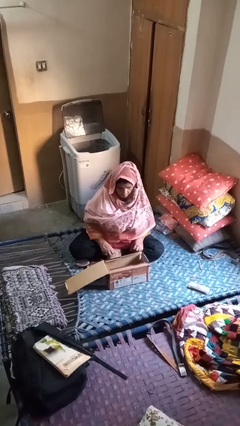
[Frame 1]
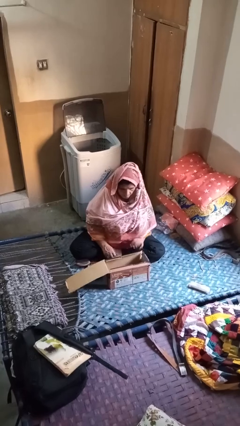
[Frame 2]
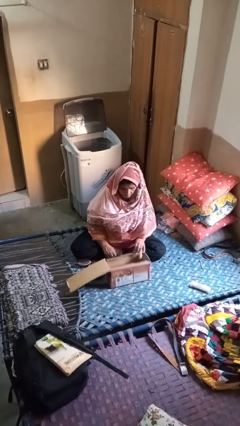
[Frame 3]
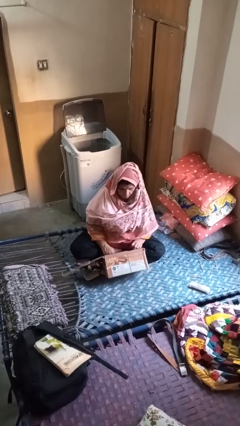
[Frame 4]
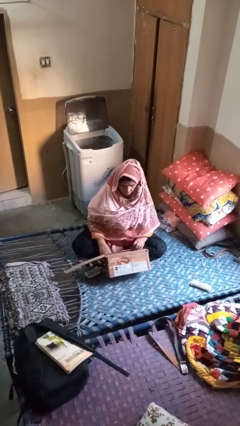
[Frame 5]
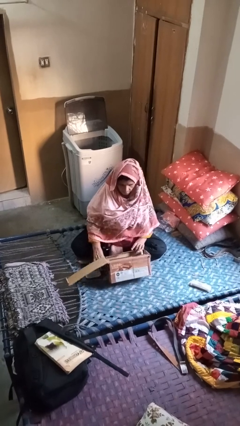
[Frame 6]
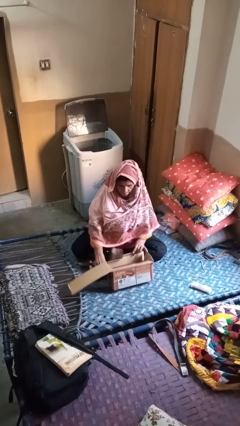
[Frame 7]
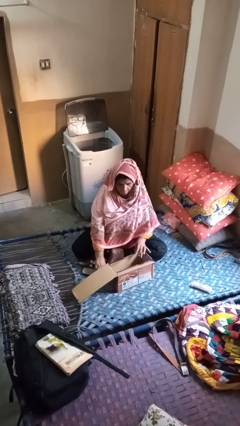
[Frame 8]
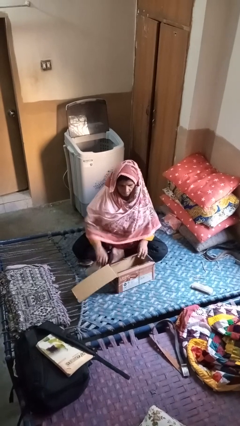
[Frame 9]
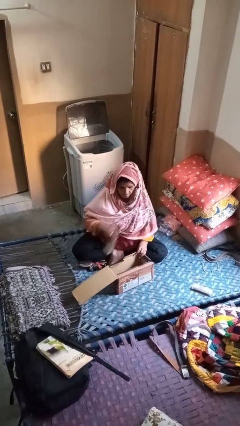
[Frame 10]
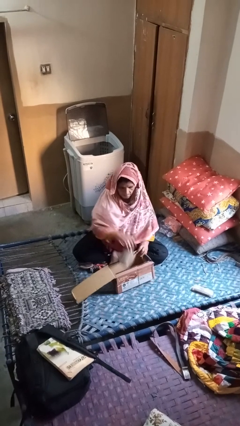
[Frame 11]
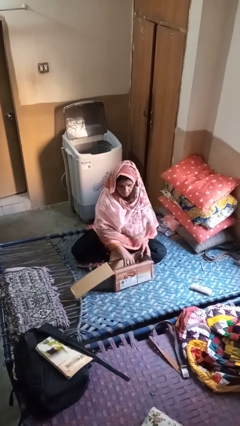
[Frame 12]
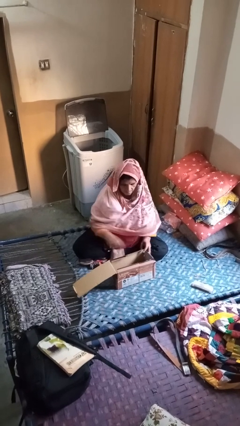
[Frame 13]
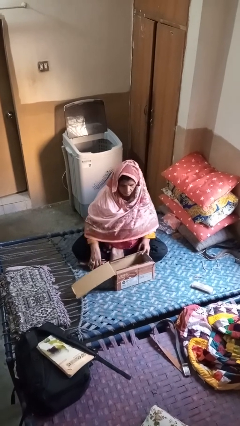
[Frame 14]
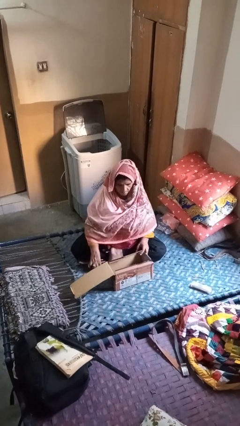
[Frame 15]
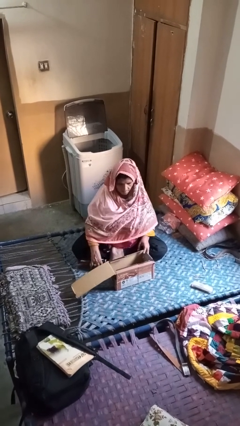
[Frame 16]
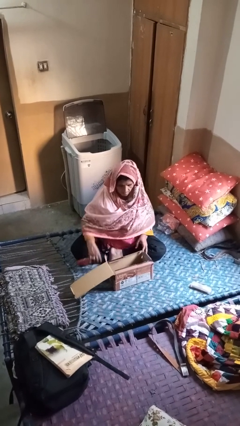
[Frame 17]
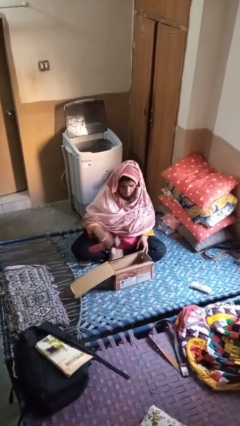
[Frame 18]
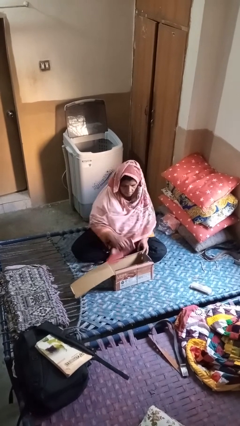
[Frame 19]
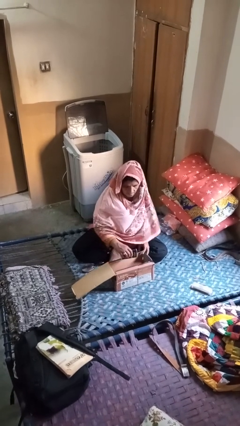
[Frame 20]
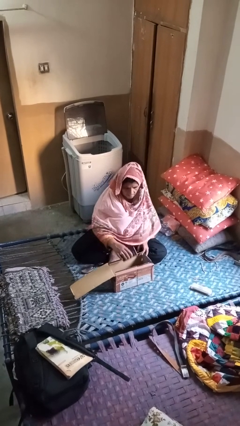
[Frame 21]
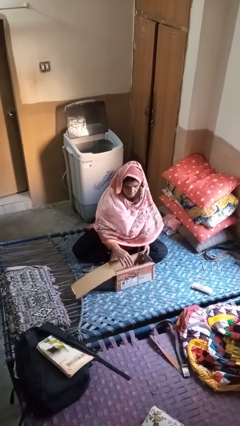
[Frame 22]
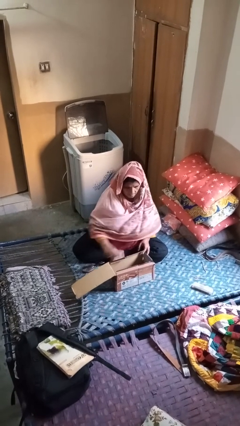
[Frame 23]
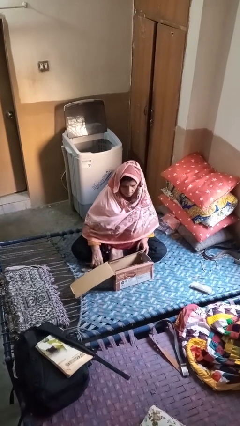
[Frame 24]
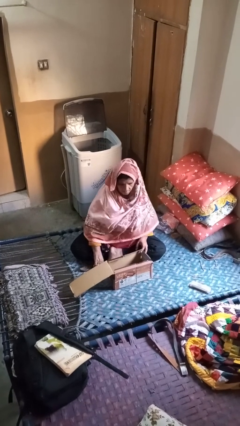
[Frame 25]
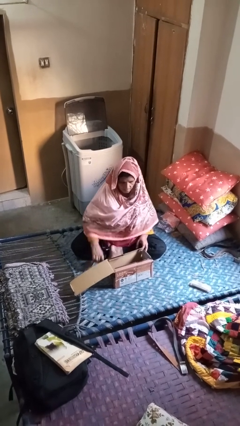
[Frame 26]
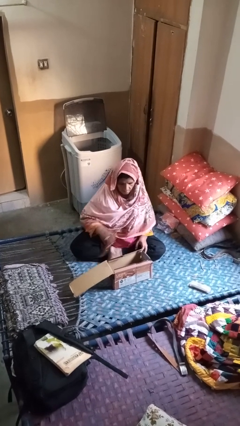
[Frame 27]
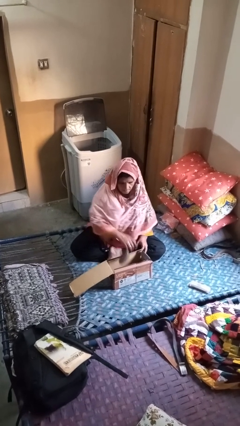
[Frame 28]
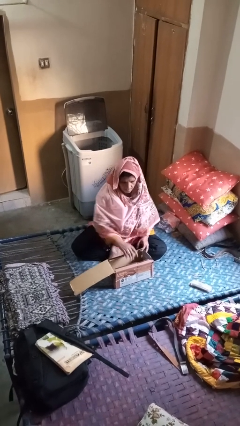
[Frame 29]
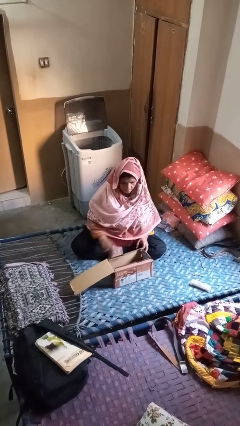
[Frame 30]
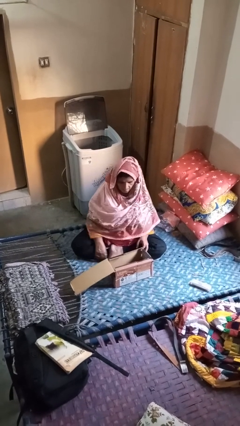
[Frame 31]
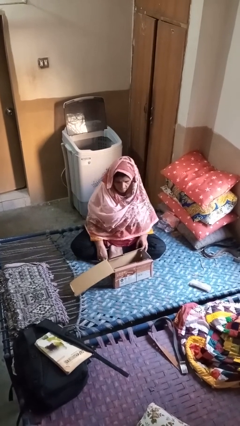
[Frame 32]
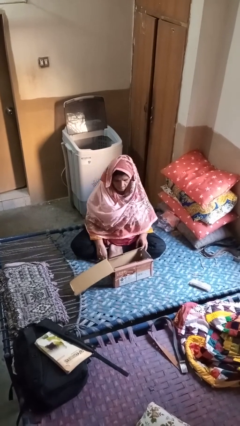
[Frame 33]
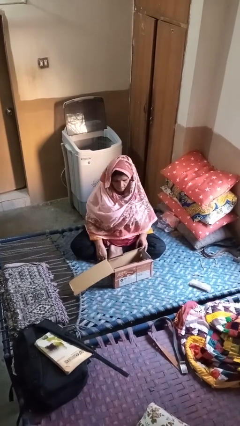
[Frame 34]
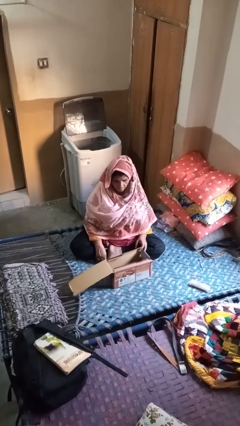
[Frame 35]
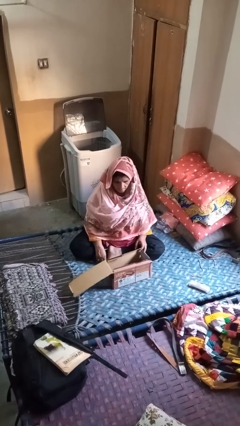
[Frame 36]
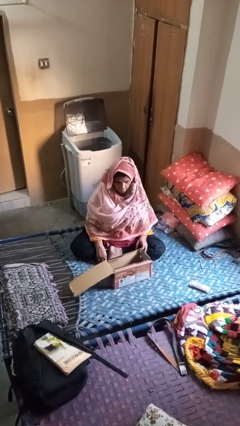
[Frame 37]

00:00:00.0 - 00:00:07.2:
person puts object into box

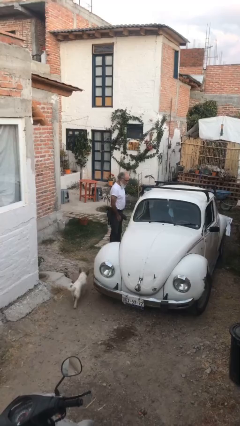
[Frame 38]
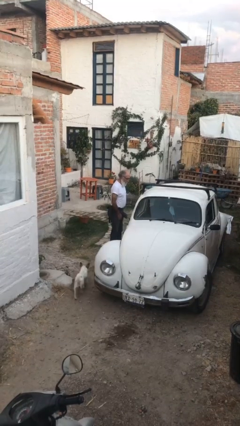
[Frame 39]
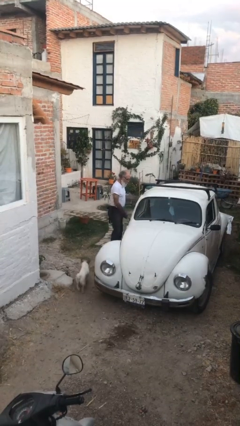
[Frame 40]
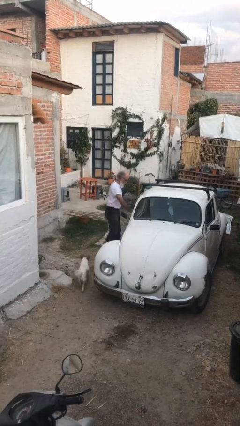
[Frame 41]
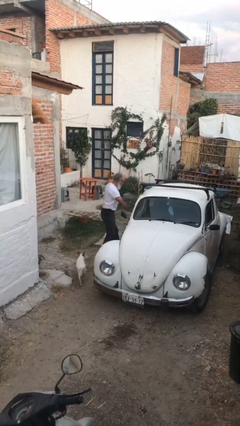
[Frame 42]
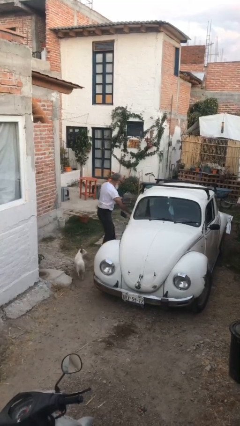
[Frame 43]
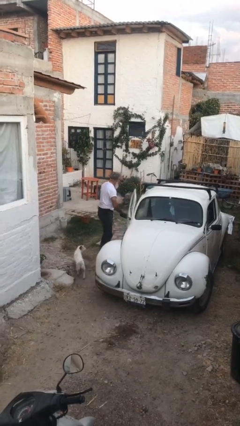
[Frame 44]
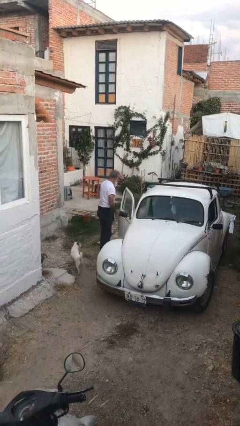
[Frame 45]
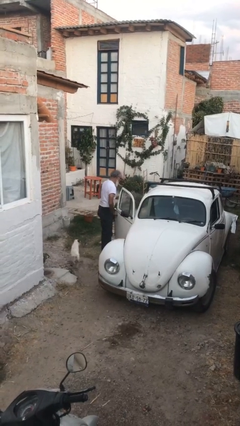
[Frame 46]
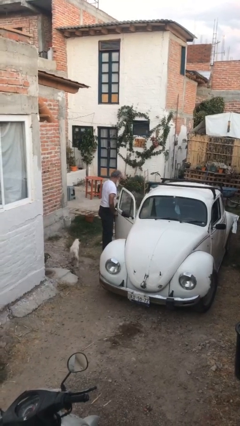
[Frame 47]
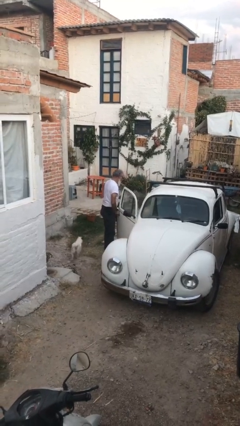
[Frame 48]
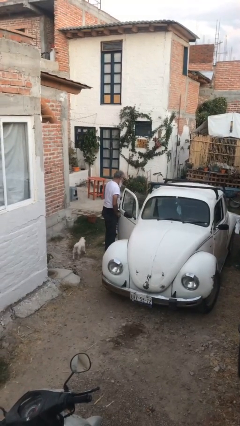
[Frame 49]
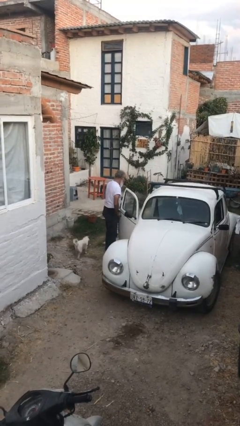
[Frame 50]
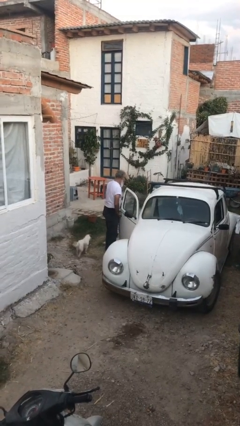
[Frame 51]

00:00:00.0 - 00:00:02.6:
person opens car door

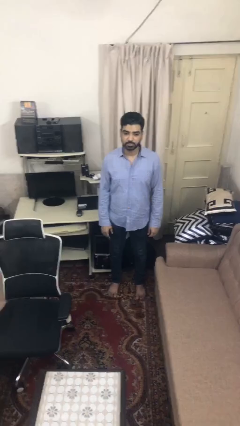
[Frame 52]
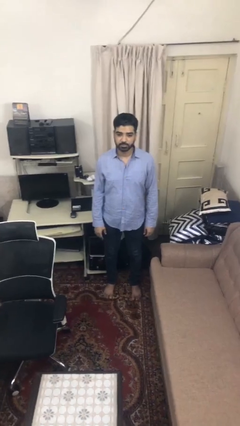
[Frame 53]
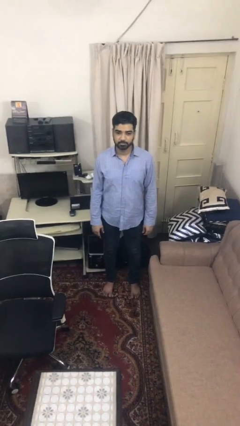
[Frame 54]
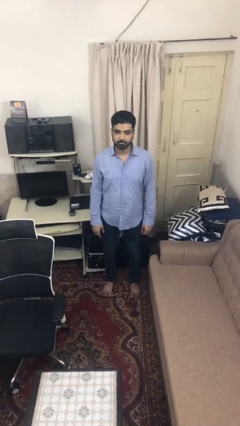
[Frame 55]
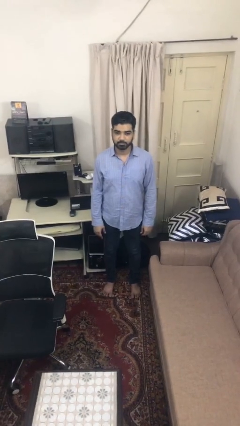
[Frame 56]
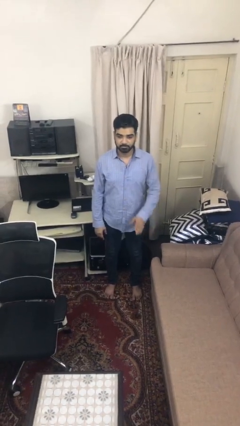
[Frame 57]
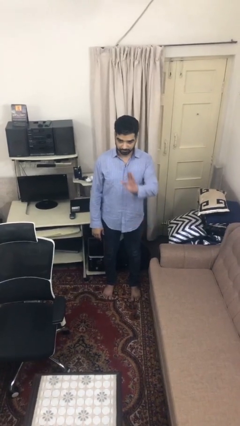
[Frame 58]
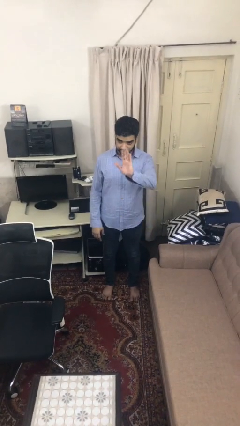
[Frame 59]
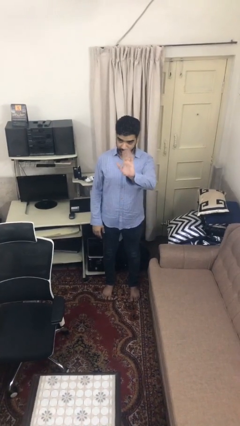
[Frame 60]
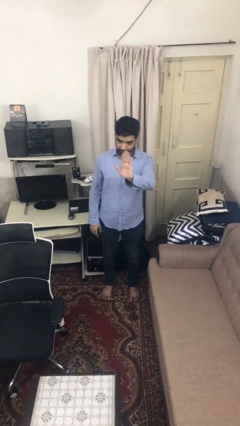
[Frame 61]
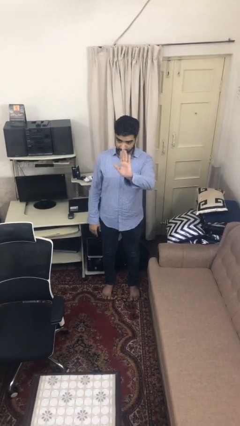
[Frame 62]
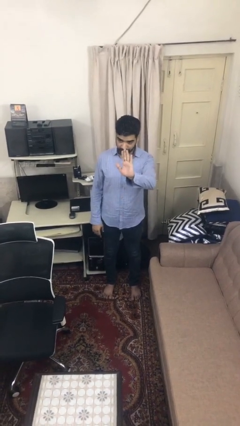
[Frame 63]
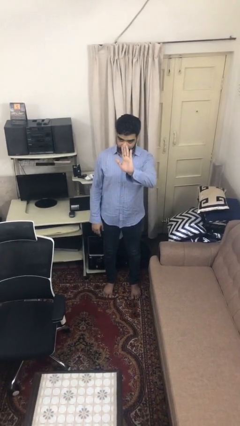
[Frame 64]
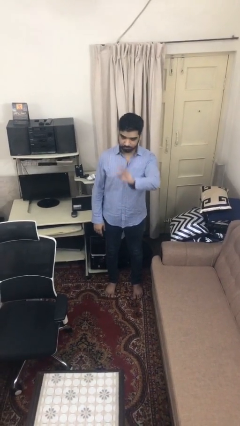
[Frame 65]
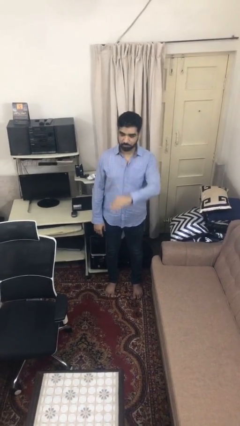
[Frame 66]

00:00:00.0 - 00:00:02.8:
person waves at person

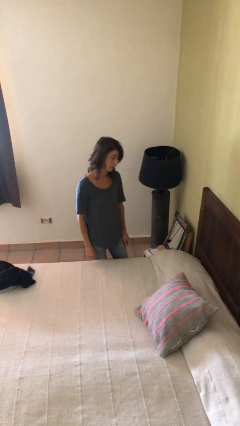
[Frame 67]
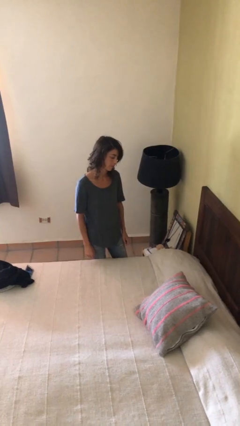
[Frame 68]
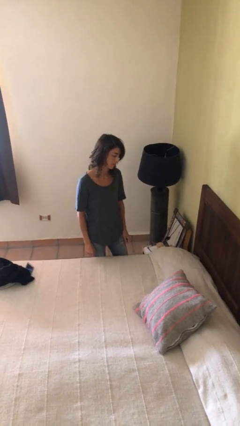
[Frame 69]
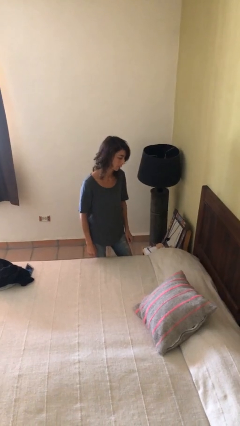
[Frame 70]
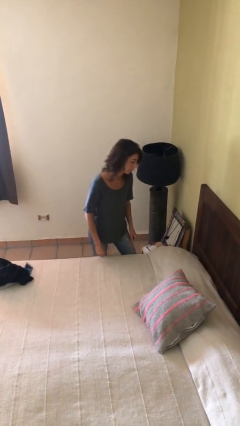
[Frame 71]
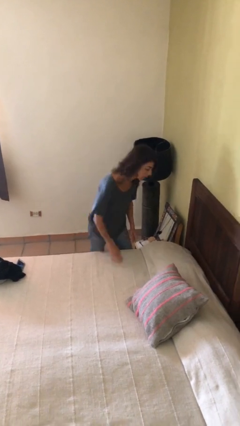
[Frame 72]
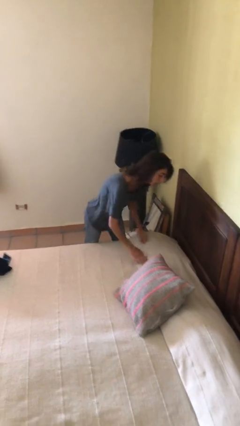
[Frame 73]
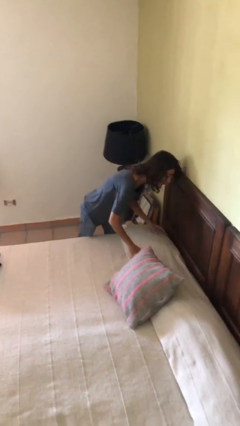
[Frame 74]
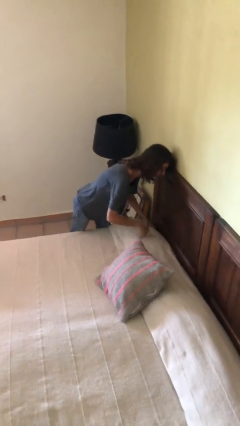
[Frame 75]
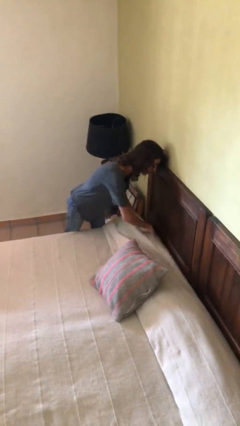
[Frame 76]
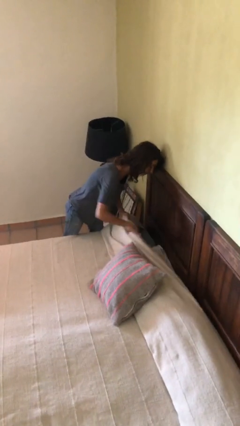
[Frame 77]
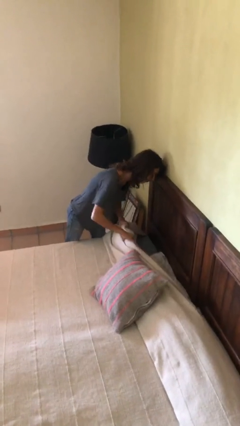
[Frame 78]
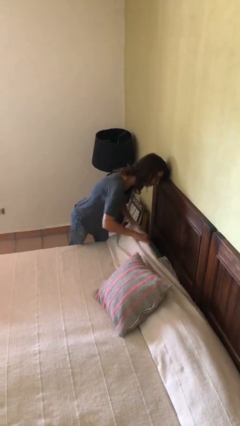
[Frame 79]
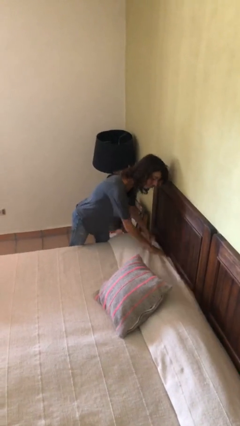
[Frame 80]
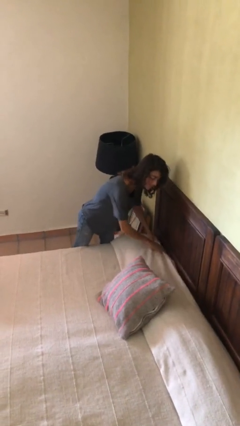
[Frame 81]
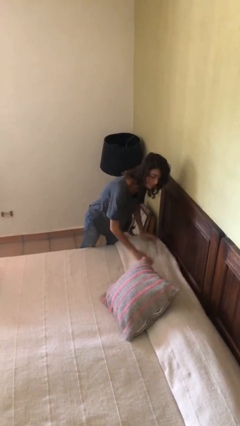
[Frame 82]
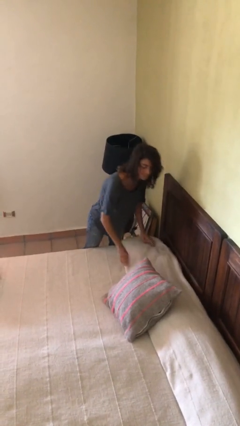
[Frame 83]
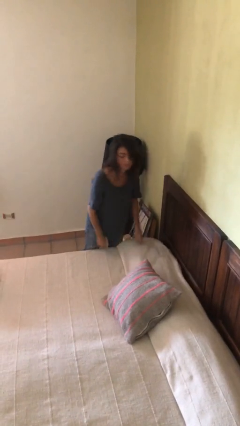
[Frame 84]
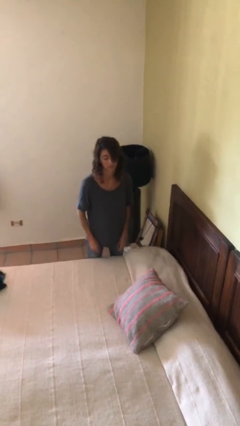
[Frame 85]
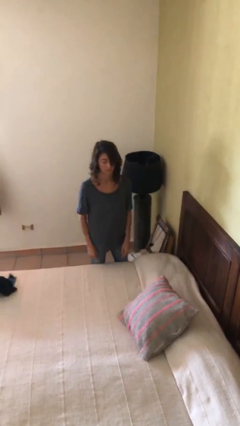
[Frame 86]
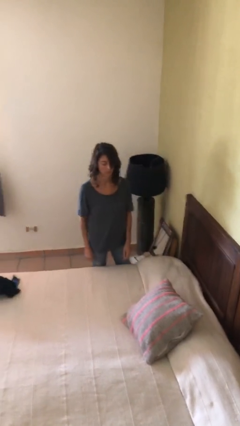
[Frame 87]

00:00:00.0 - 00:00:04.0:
person searches in couch

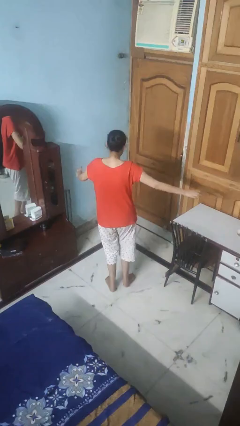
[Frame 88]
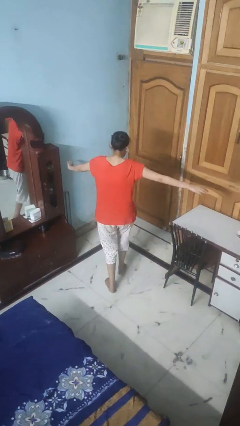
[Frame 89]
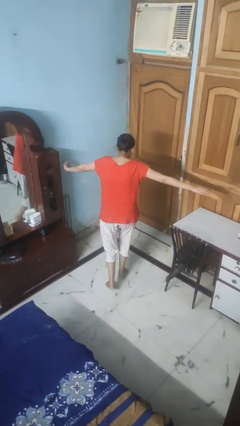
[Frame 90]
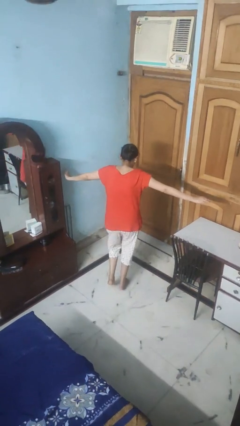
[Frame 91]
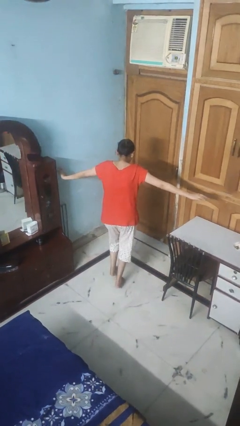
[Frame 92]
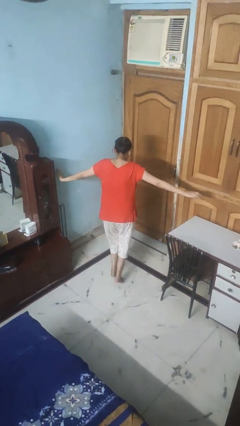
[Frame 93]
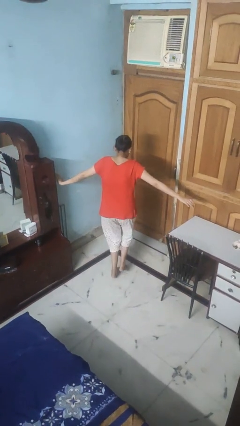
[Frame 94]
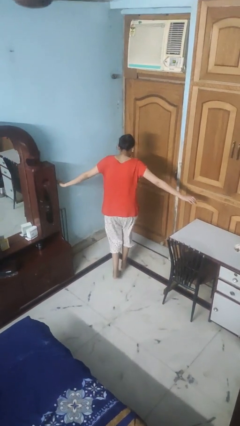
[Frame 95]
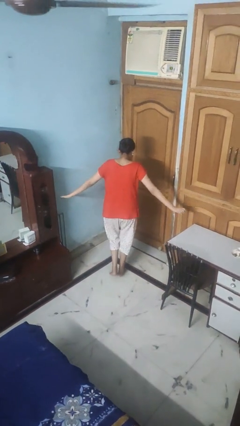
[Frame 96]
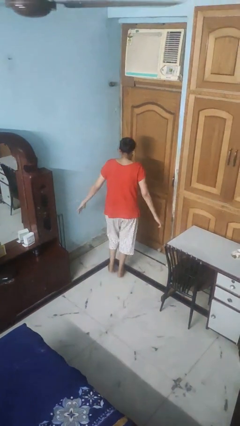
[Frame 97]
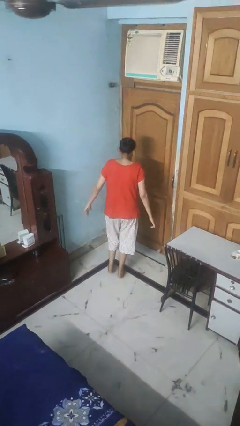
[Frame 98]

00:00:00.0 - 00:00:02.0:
person walks tiptoe
